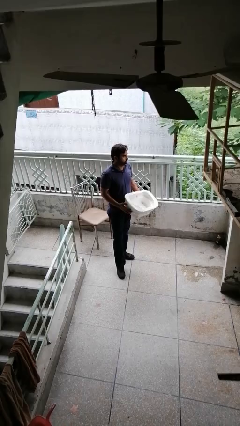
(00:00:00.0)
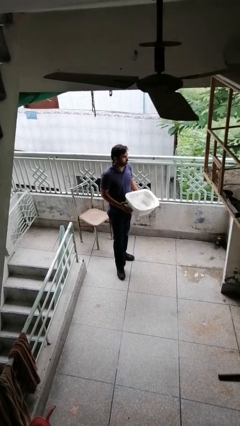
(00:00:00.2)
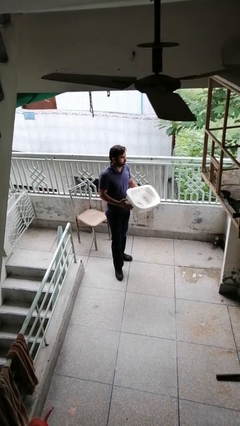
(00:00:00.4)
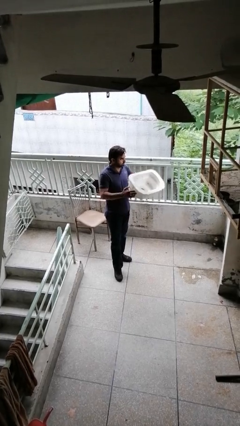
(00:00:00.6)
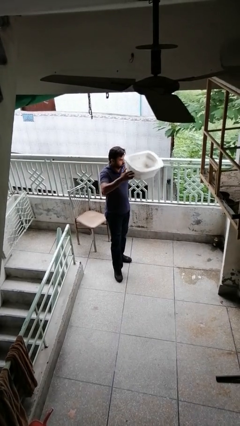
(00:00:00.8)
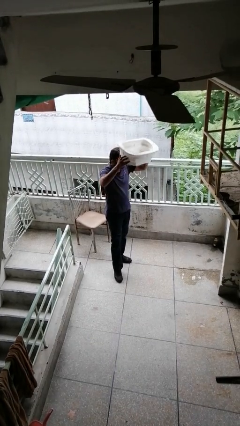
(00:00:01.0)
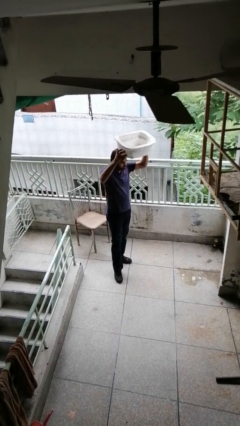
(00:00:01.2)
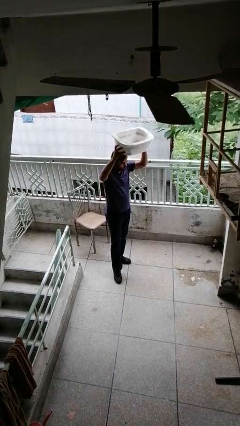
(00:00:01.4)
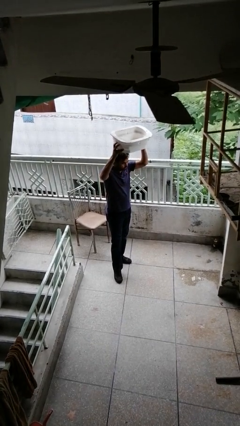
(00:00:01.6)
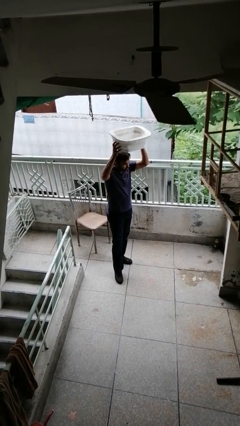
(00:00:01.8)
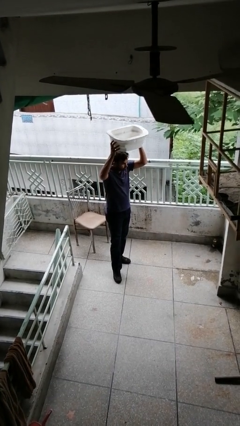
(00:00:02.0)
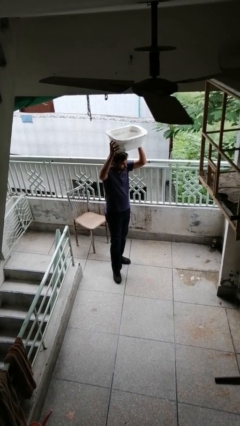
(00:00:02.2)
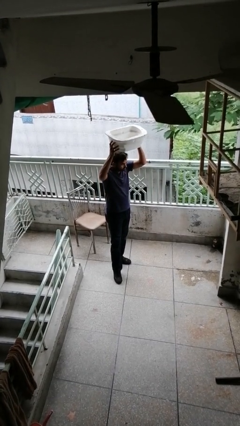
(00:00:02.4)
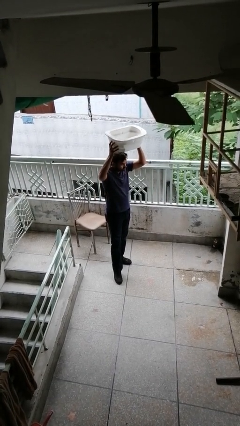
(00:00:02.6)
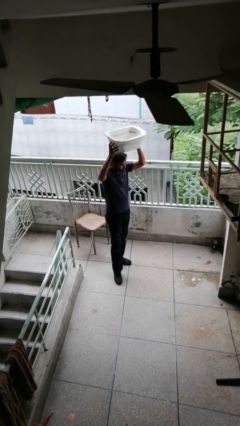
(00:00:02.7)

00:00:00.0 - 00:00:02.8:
person holds object above head

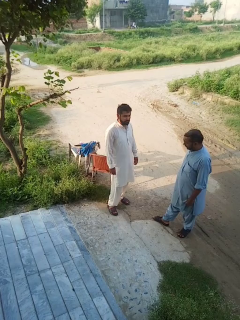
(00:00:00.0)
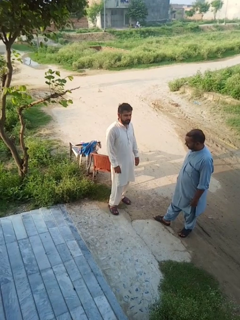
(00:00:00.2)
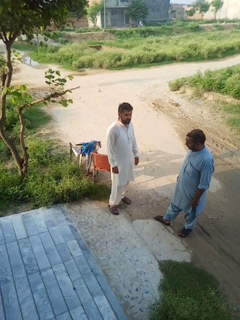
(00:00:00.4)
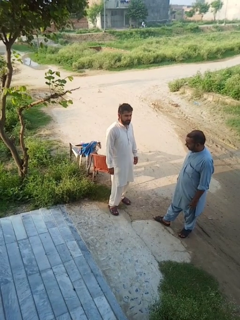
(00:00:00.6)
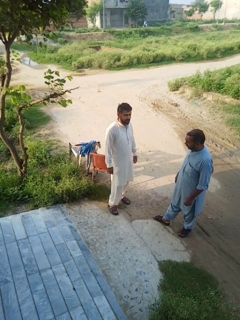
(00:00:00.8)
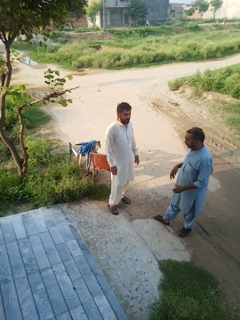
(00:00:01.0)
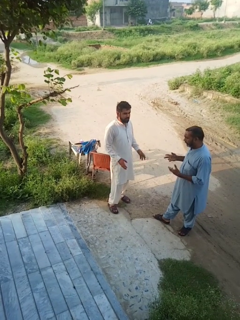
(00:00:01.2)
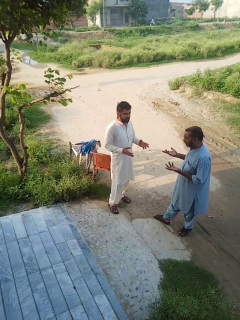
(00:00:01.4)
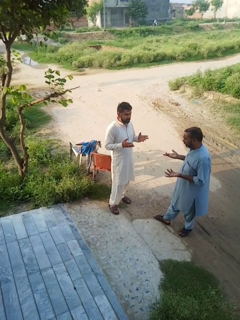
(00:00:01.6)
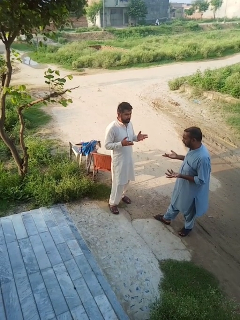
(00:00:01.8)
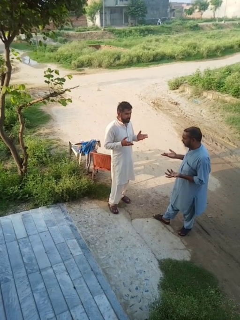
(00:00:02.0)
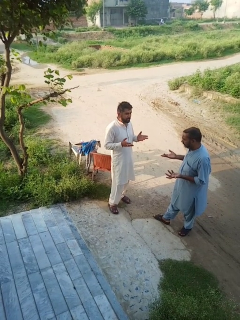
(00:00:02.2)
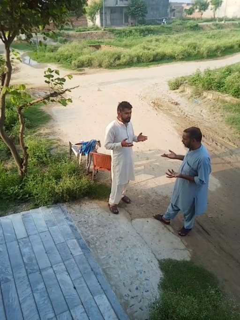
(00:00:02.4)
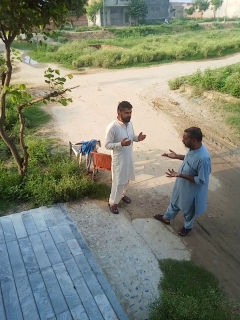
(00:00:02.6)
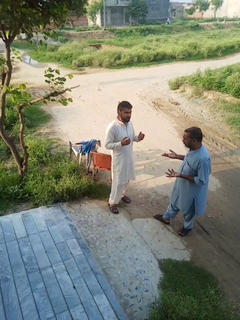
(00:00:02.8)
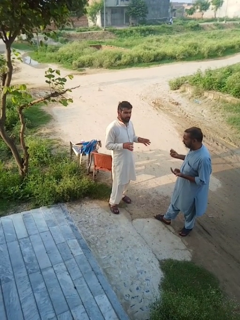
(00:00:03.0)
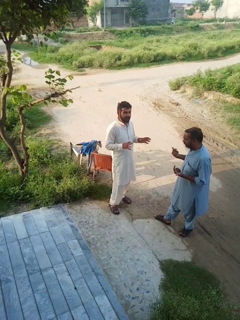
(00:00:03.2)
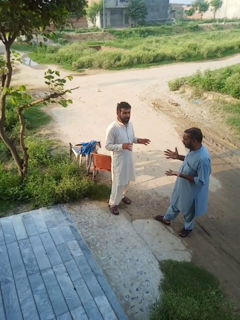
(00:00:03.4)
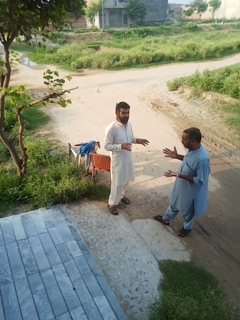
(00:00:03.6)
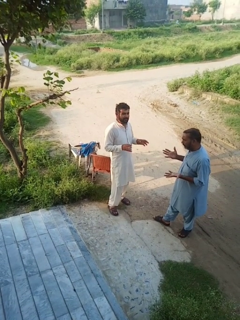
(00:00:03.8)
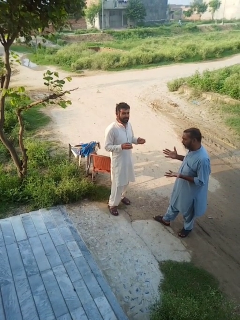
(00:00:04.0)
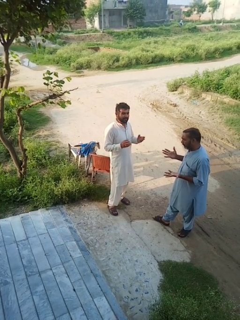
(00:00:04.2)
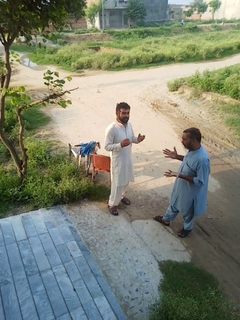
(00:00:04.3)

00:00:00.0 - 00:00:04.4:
person talks to person

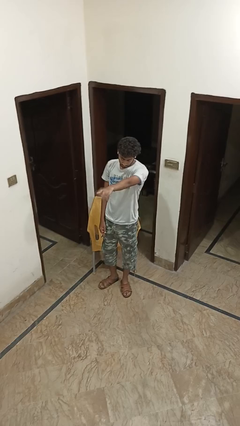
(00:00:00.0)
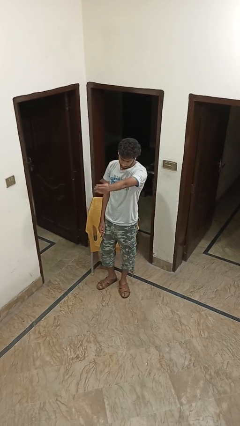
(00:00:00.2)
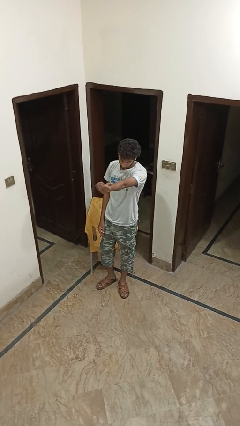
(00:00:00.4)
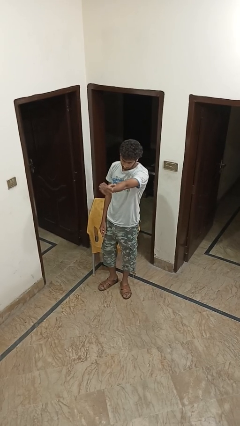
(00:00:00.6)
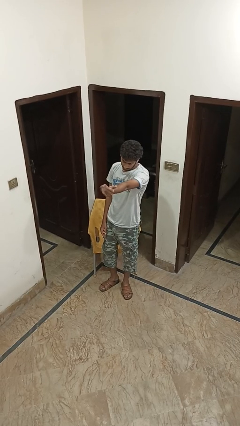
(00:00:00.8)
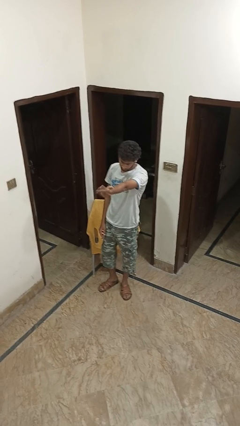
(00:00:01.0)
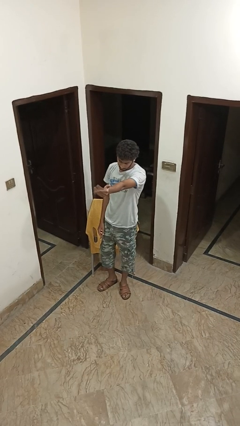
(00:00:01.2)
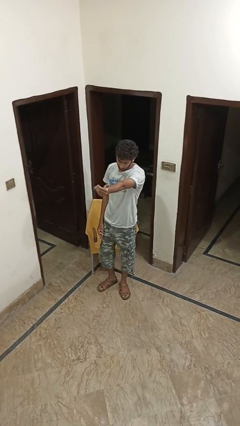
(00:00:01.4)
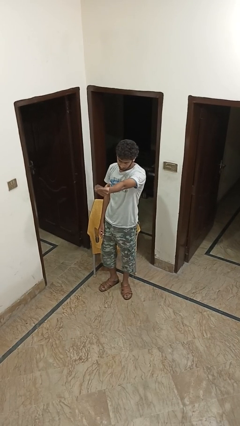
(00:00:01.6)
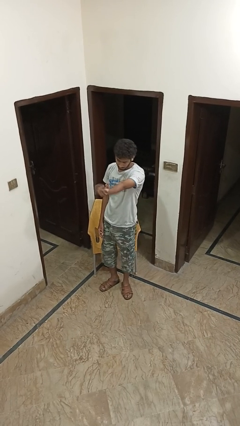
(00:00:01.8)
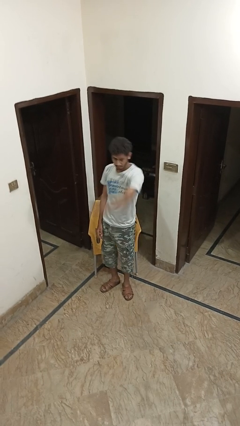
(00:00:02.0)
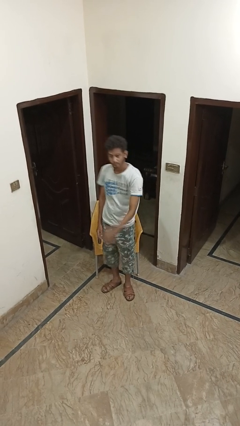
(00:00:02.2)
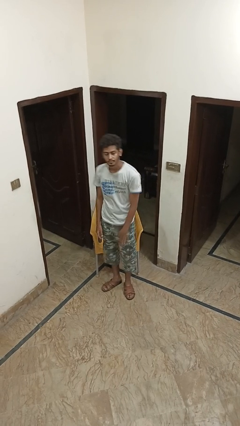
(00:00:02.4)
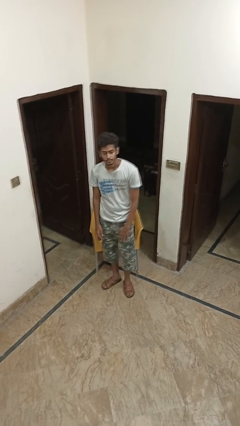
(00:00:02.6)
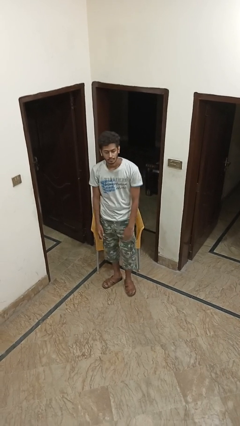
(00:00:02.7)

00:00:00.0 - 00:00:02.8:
person gestures come here

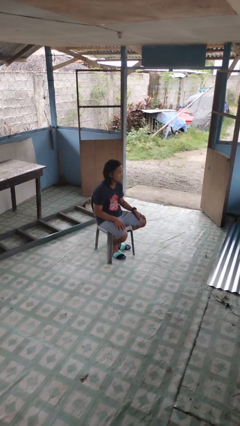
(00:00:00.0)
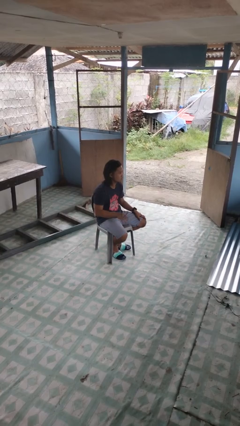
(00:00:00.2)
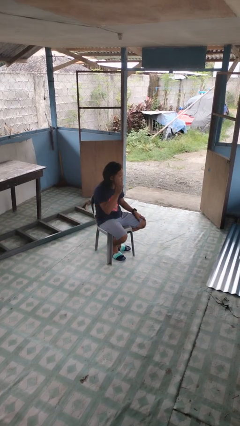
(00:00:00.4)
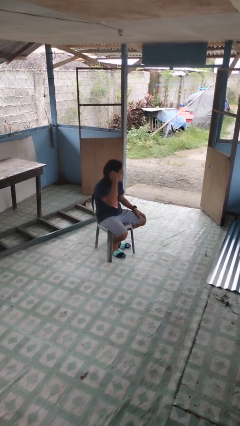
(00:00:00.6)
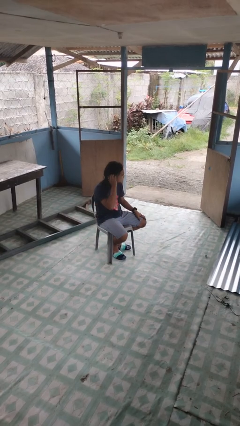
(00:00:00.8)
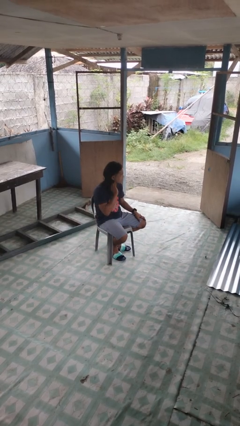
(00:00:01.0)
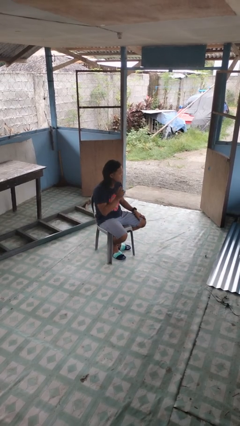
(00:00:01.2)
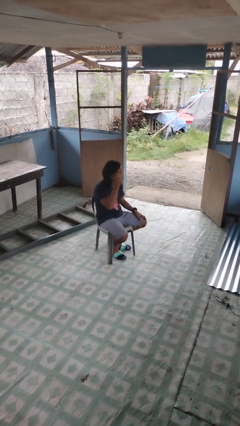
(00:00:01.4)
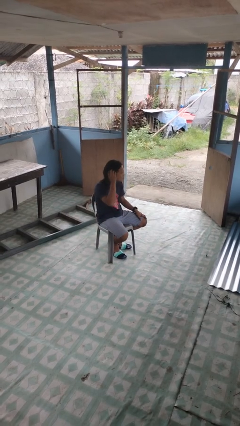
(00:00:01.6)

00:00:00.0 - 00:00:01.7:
person strokes hair

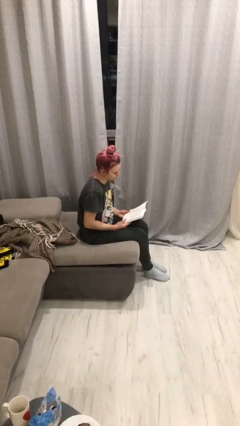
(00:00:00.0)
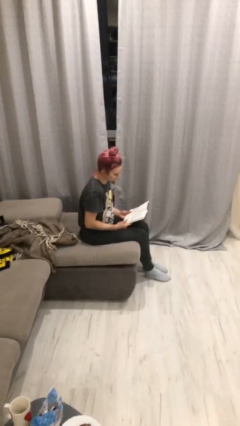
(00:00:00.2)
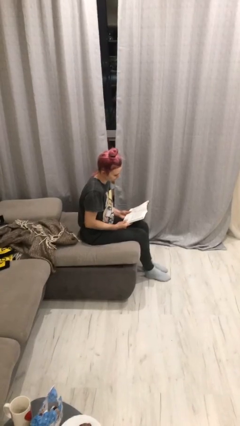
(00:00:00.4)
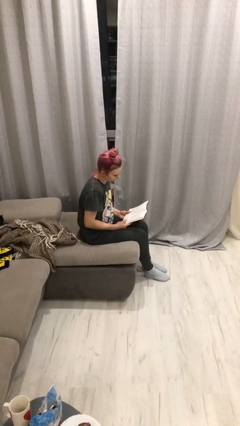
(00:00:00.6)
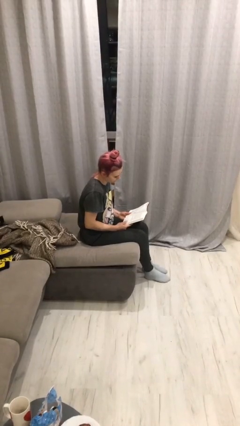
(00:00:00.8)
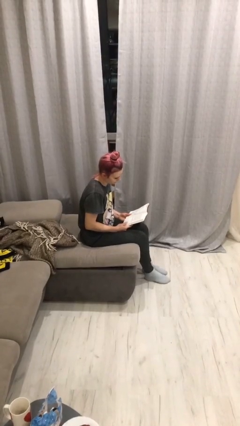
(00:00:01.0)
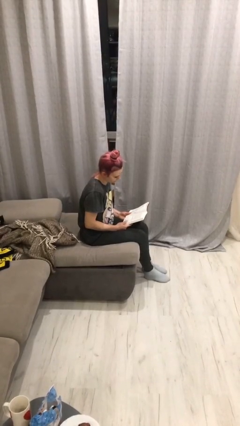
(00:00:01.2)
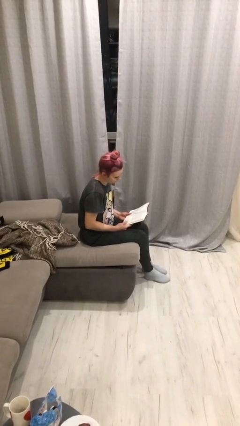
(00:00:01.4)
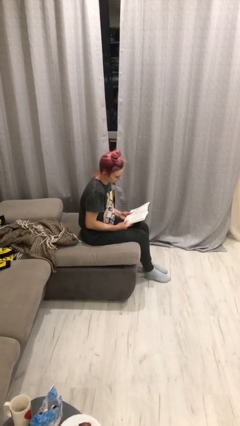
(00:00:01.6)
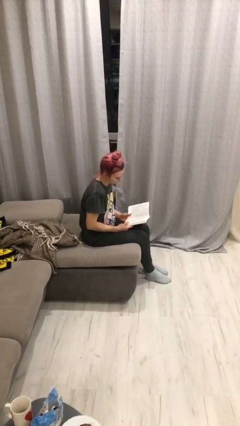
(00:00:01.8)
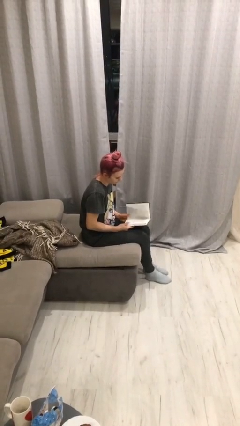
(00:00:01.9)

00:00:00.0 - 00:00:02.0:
person reads document

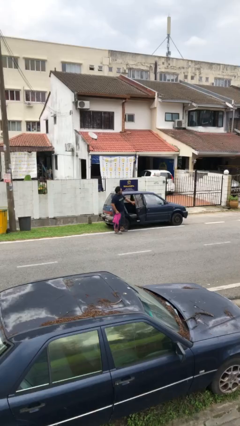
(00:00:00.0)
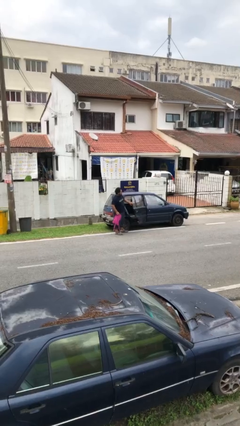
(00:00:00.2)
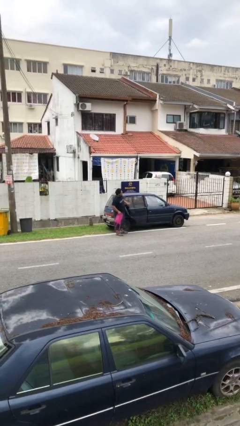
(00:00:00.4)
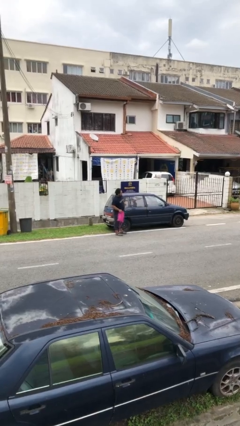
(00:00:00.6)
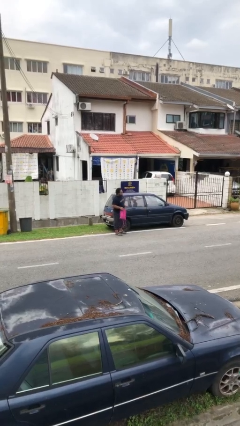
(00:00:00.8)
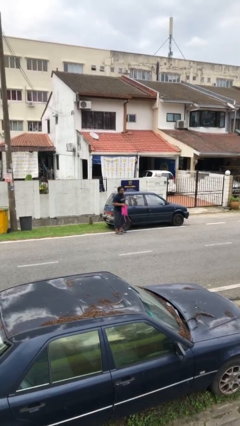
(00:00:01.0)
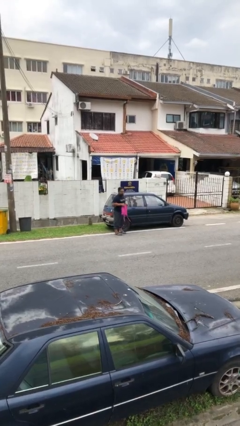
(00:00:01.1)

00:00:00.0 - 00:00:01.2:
person closes car door

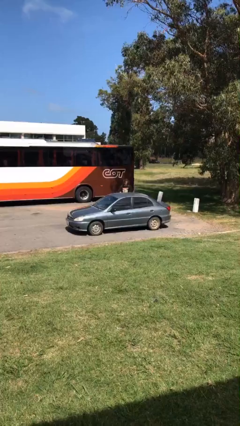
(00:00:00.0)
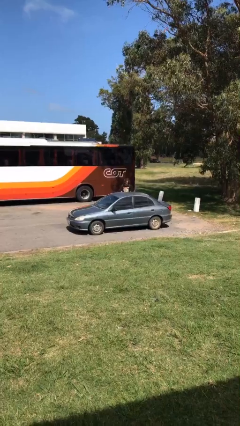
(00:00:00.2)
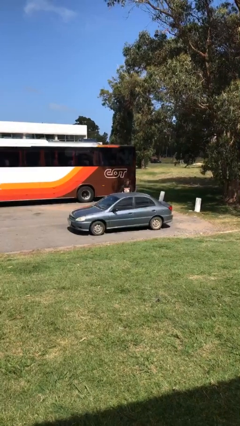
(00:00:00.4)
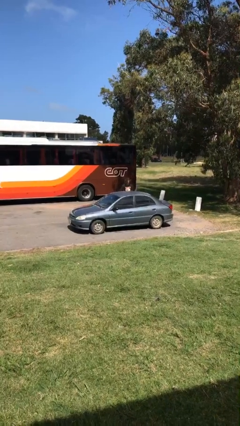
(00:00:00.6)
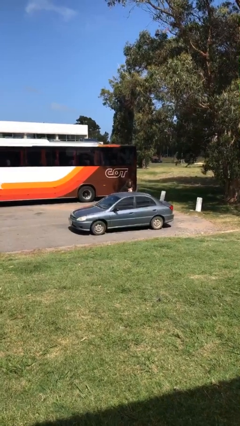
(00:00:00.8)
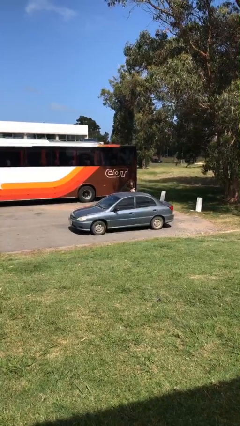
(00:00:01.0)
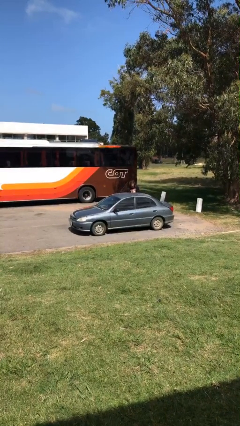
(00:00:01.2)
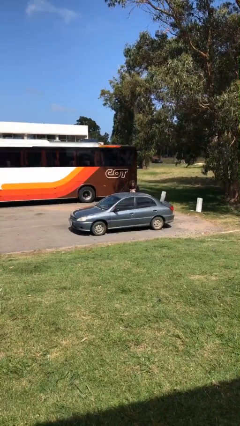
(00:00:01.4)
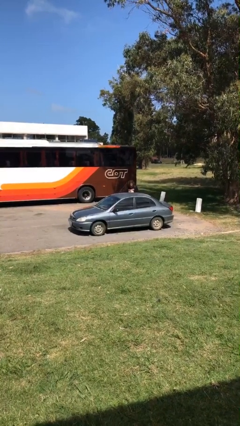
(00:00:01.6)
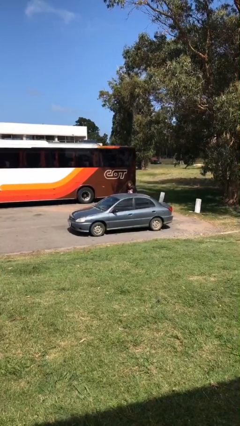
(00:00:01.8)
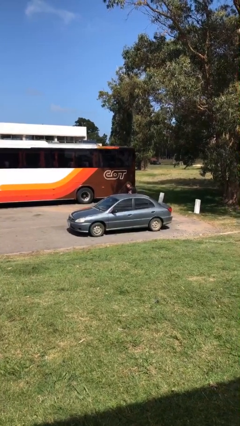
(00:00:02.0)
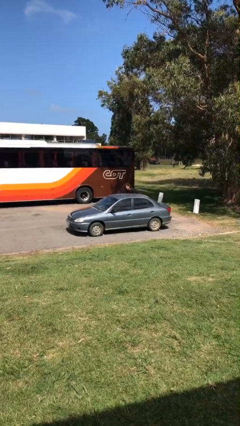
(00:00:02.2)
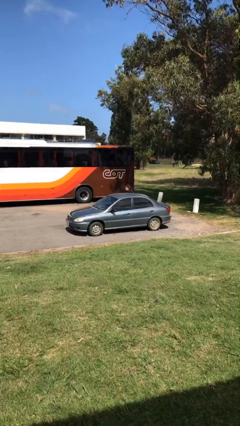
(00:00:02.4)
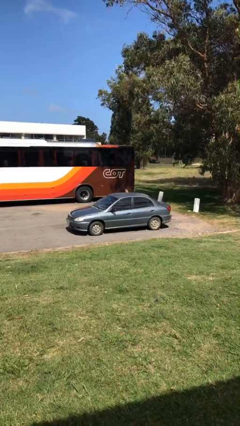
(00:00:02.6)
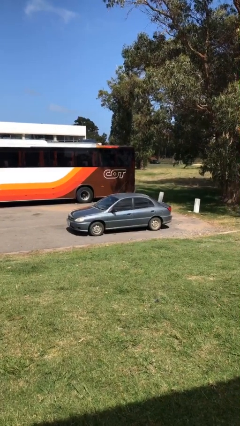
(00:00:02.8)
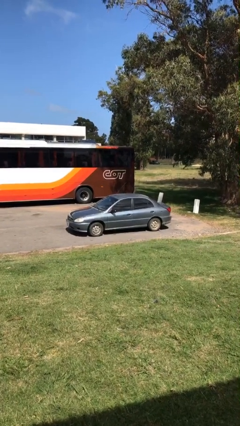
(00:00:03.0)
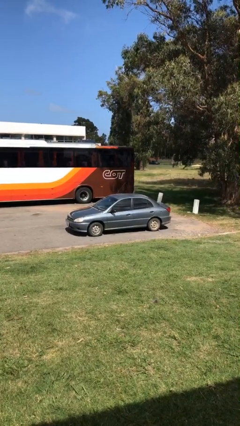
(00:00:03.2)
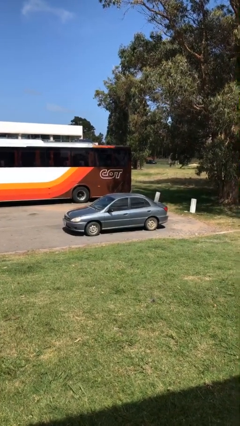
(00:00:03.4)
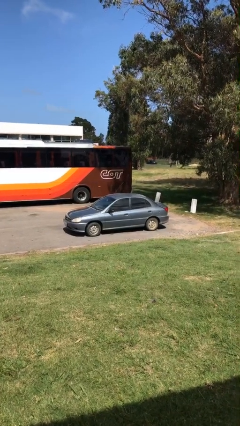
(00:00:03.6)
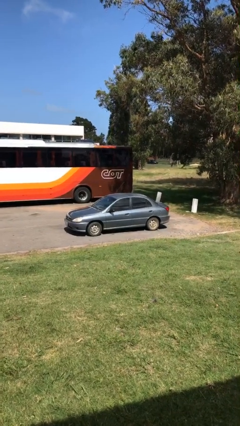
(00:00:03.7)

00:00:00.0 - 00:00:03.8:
car picks up person
